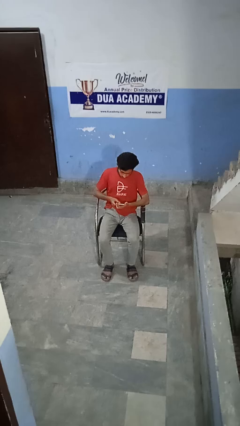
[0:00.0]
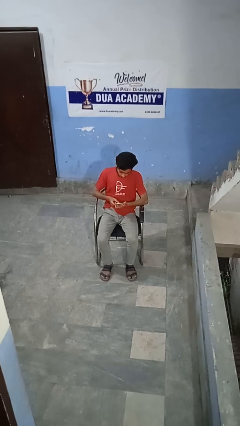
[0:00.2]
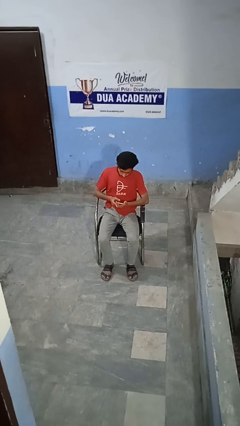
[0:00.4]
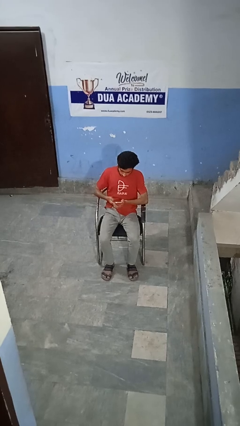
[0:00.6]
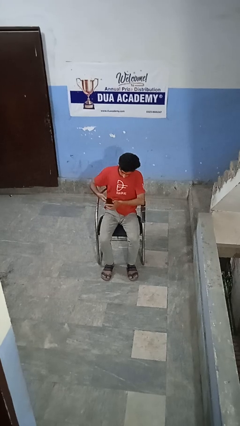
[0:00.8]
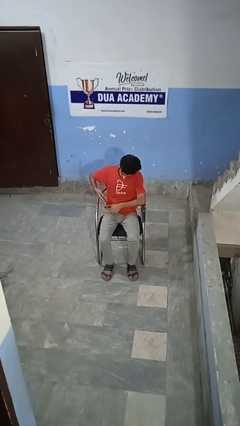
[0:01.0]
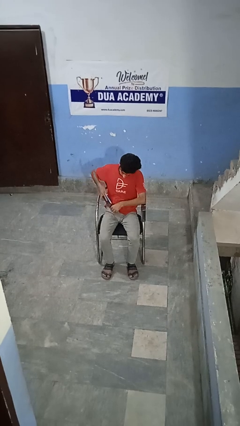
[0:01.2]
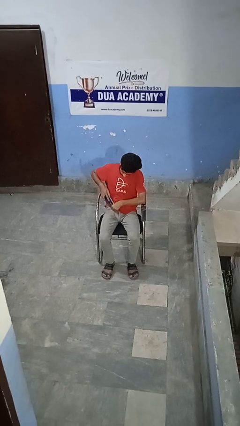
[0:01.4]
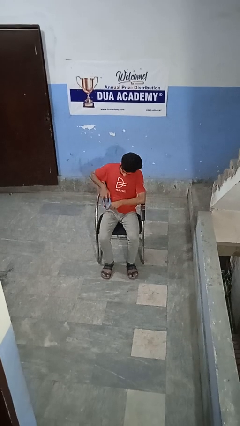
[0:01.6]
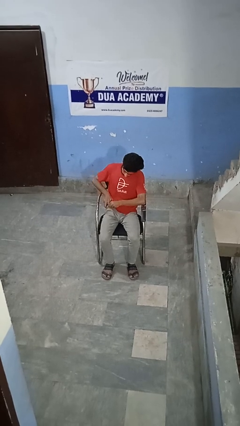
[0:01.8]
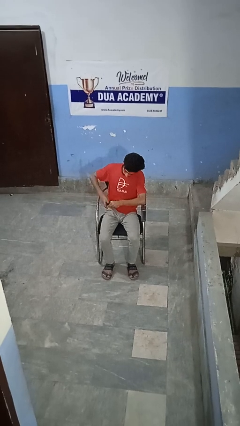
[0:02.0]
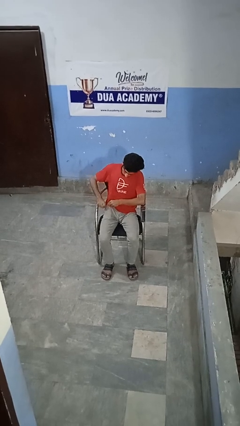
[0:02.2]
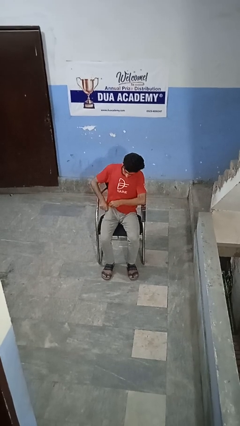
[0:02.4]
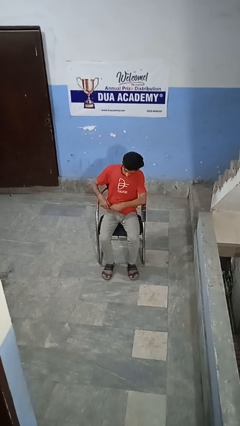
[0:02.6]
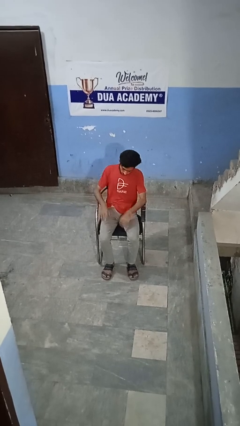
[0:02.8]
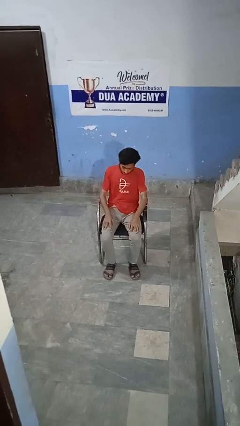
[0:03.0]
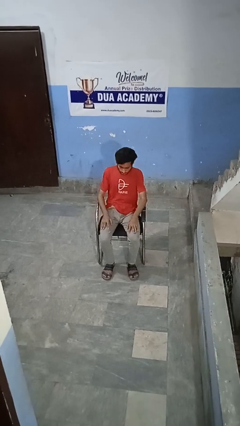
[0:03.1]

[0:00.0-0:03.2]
person puts phone into pocket

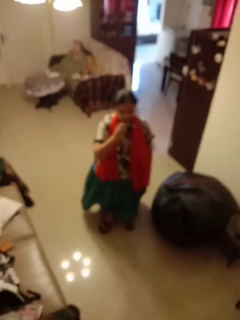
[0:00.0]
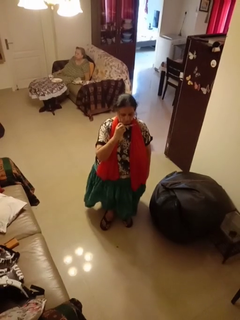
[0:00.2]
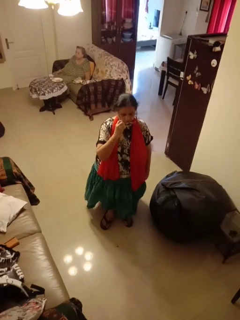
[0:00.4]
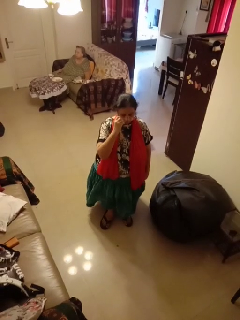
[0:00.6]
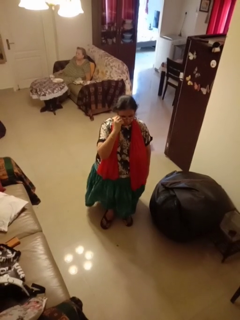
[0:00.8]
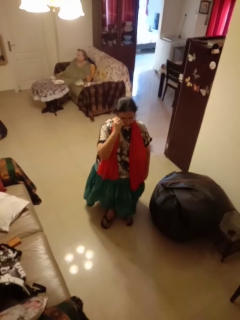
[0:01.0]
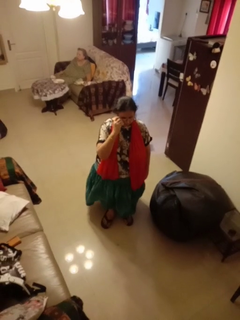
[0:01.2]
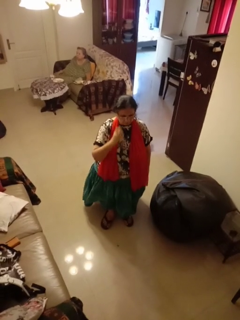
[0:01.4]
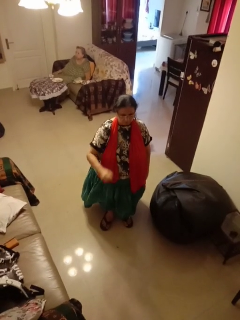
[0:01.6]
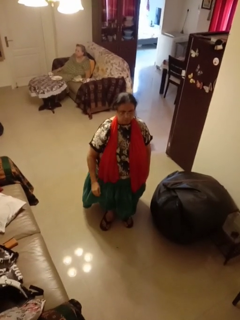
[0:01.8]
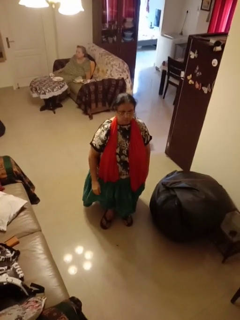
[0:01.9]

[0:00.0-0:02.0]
person puts on glasses

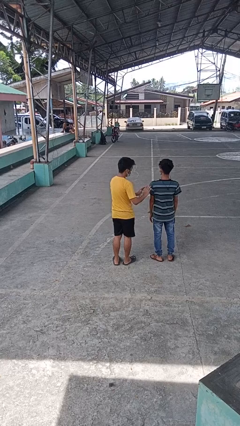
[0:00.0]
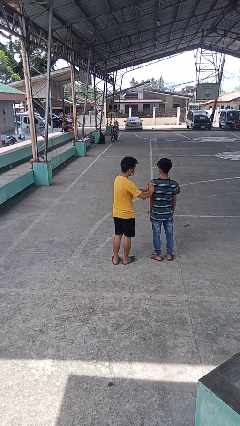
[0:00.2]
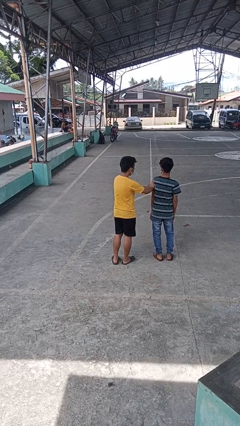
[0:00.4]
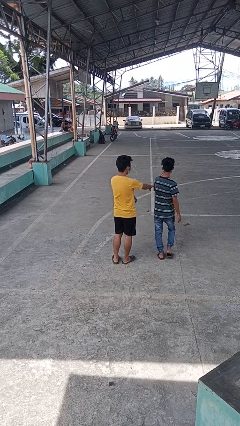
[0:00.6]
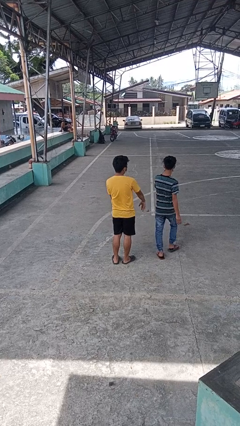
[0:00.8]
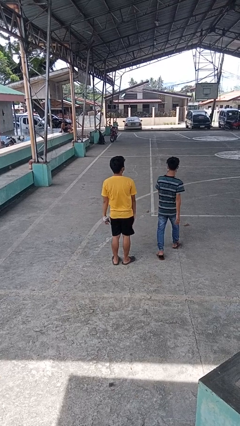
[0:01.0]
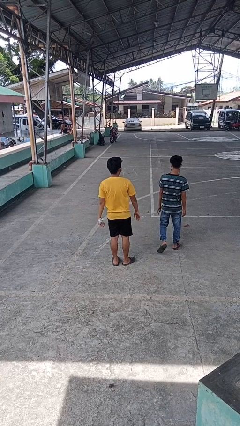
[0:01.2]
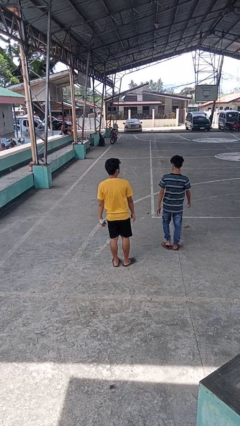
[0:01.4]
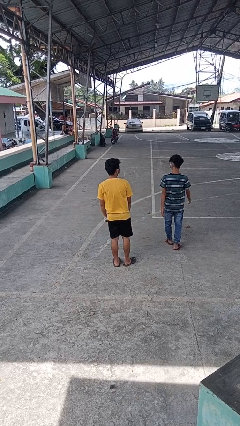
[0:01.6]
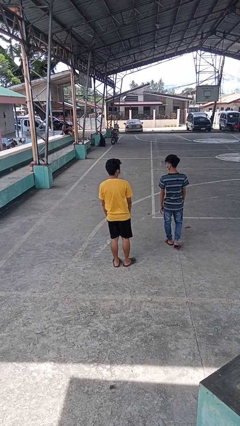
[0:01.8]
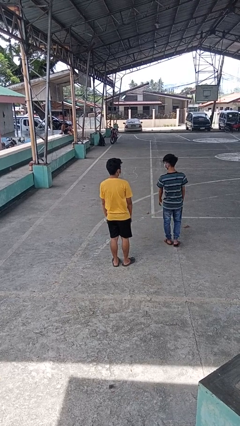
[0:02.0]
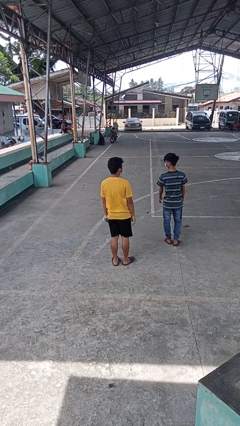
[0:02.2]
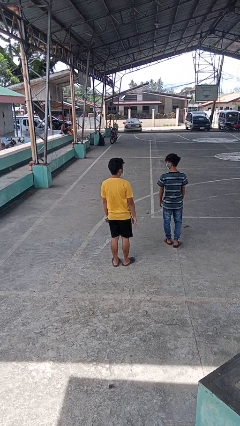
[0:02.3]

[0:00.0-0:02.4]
person shoves person

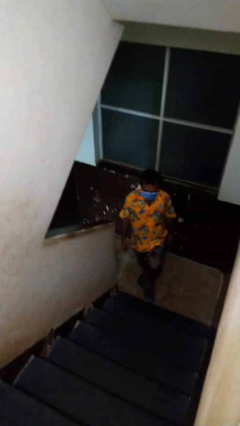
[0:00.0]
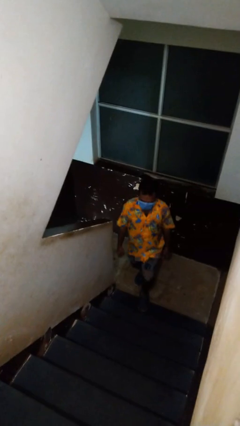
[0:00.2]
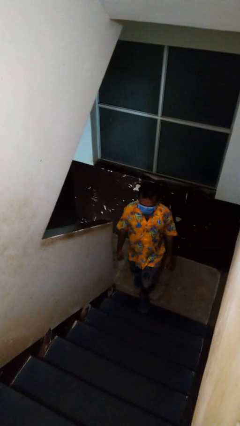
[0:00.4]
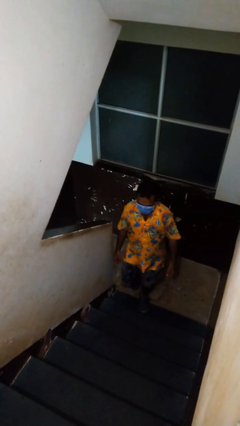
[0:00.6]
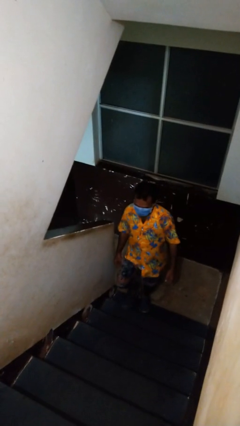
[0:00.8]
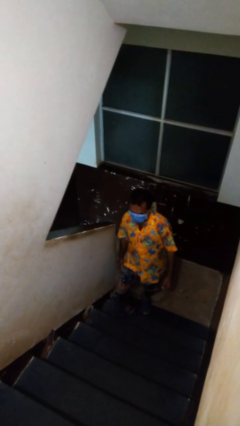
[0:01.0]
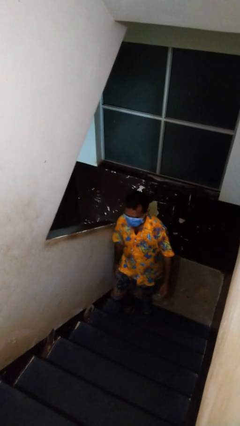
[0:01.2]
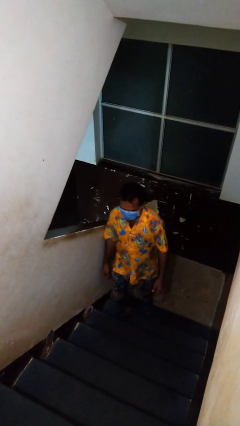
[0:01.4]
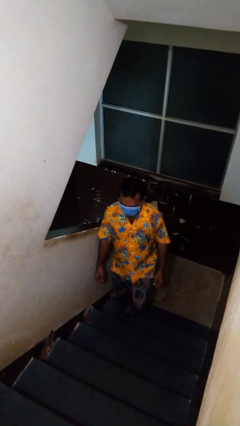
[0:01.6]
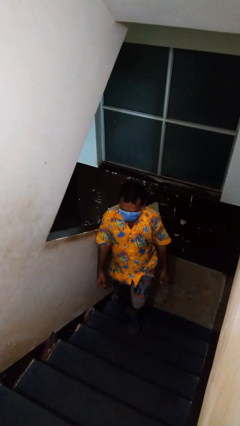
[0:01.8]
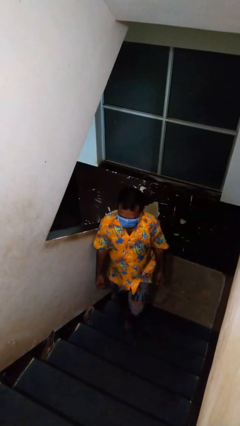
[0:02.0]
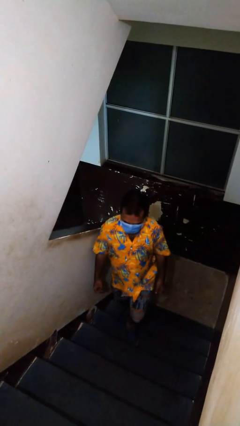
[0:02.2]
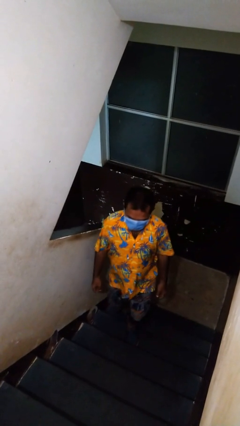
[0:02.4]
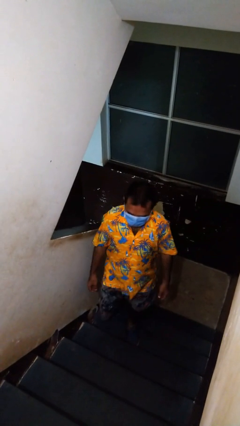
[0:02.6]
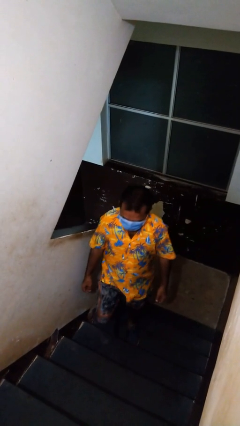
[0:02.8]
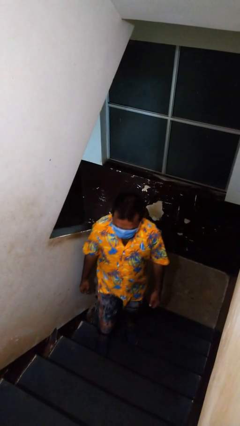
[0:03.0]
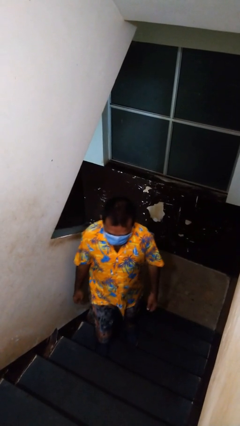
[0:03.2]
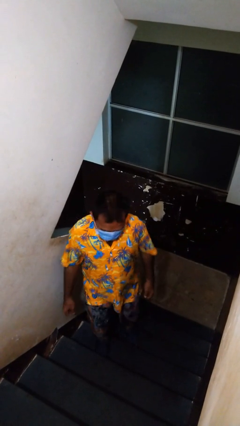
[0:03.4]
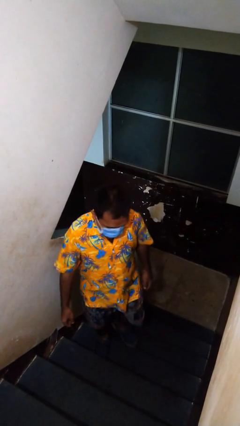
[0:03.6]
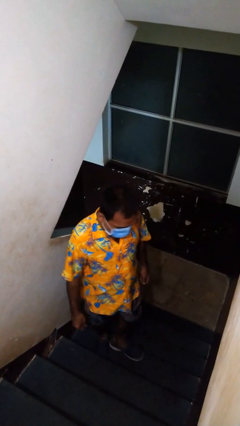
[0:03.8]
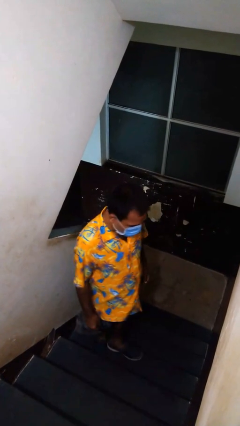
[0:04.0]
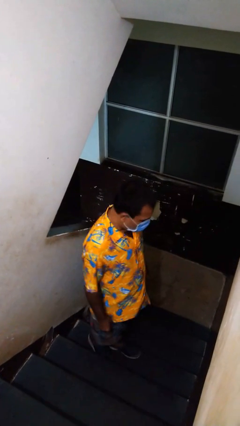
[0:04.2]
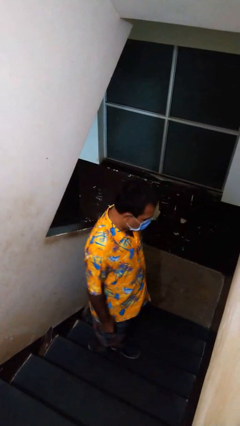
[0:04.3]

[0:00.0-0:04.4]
person climbs up stairs

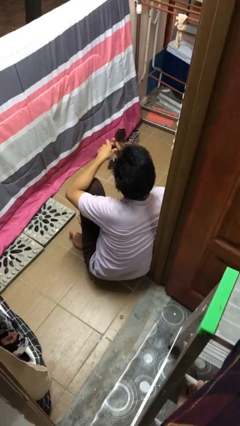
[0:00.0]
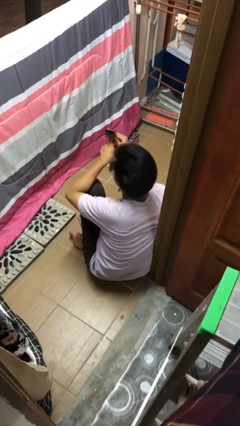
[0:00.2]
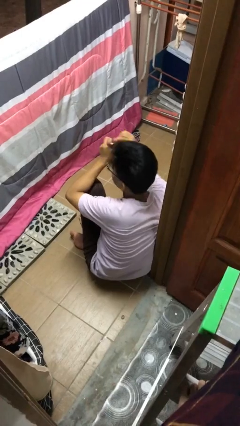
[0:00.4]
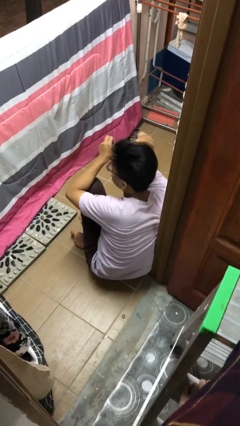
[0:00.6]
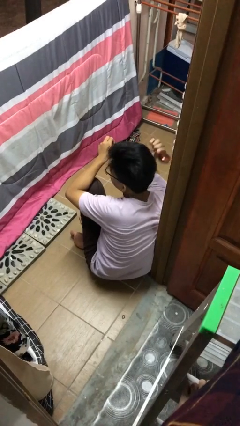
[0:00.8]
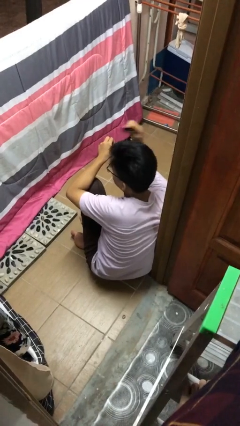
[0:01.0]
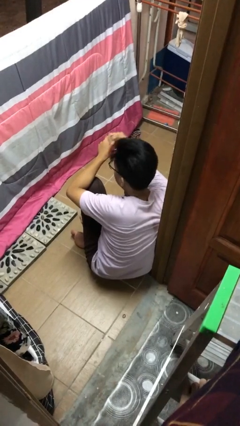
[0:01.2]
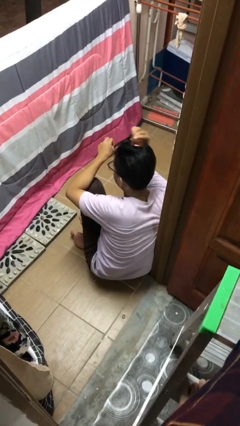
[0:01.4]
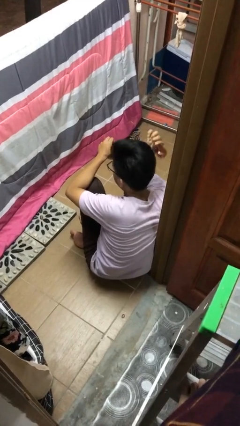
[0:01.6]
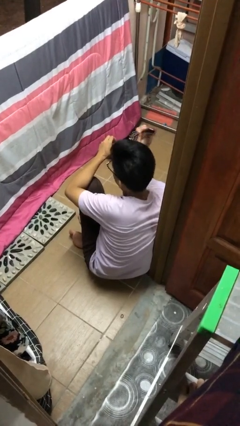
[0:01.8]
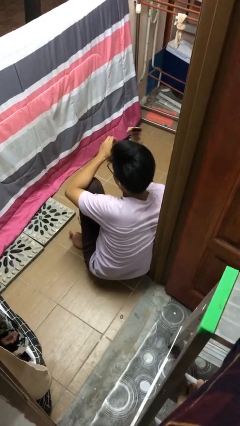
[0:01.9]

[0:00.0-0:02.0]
person brushes hair

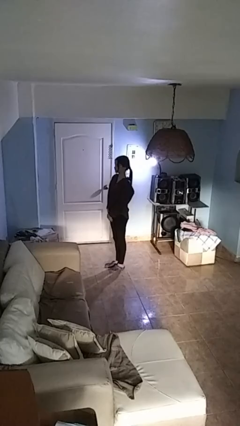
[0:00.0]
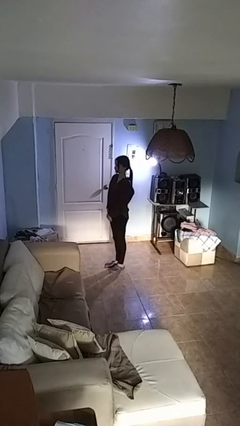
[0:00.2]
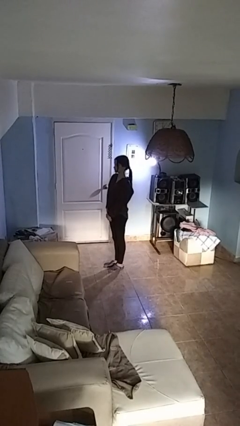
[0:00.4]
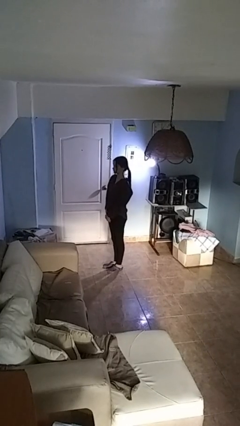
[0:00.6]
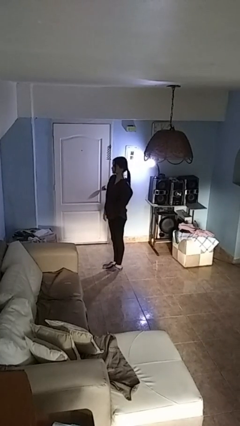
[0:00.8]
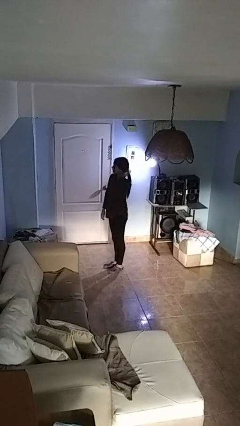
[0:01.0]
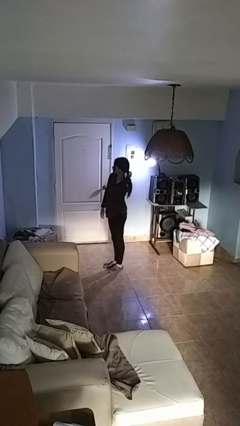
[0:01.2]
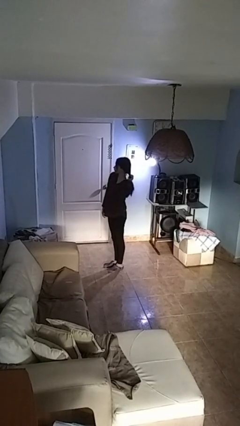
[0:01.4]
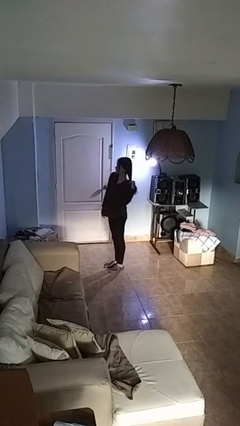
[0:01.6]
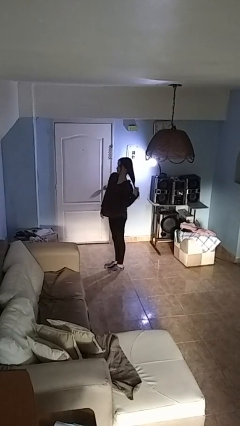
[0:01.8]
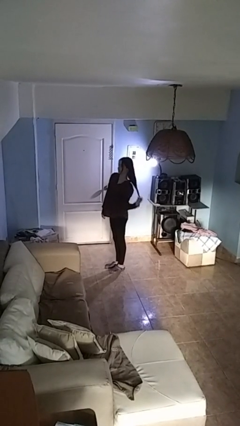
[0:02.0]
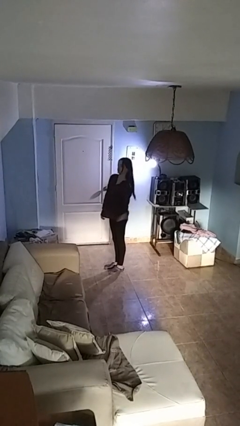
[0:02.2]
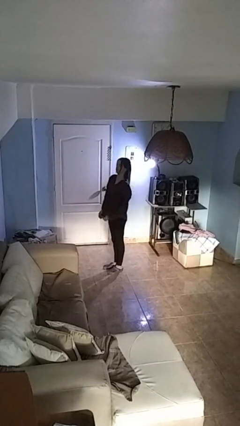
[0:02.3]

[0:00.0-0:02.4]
person takes off hairtie

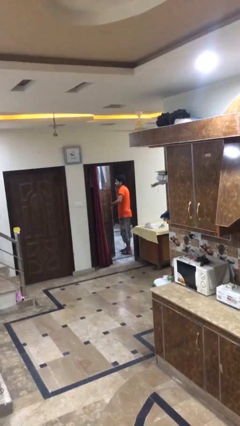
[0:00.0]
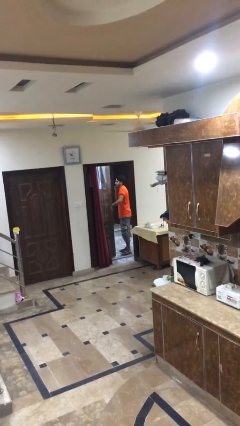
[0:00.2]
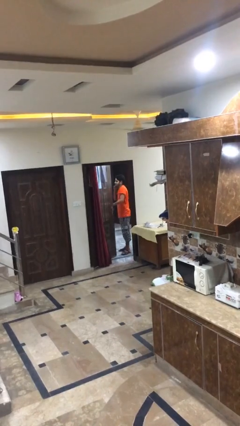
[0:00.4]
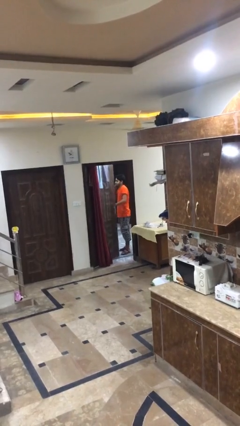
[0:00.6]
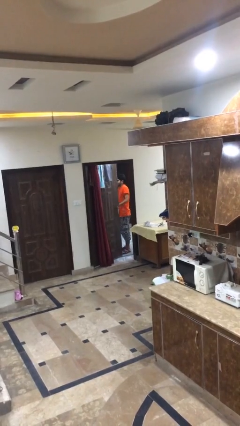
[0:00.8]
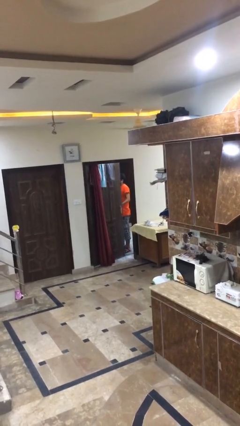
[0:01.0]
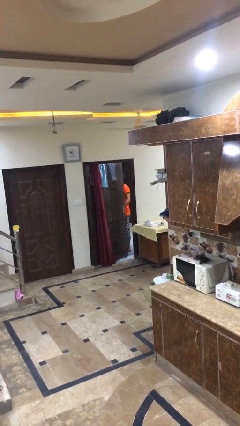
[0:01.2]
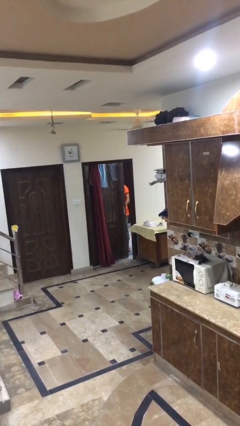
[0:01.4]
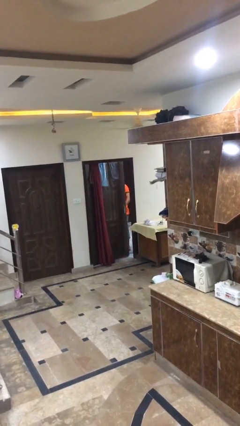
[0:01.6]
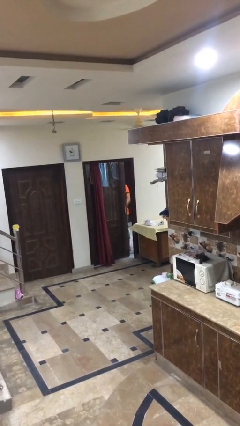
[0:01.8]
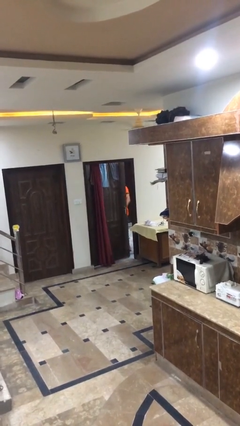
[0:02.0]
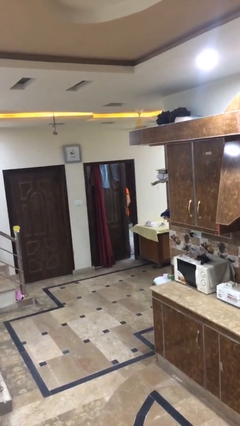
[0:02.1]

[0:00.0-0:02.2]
person closes facility door
